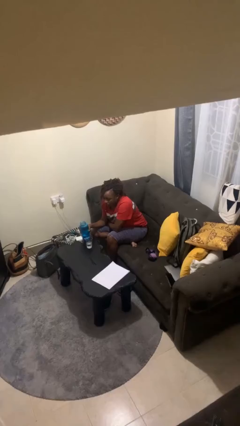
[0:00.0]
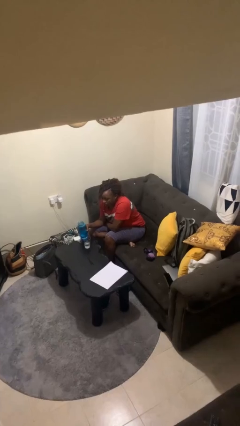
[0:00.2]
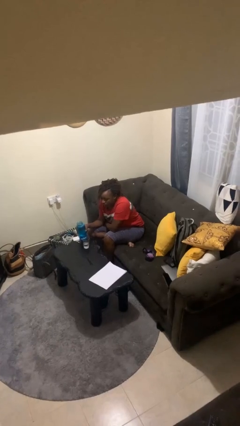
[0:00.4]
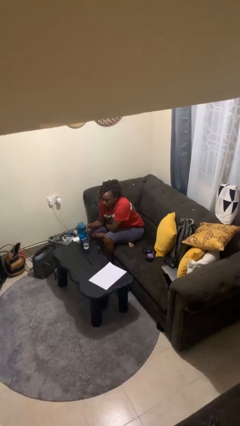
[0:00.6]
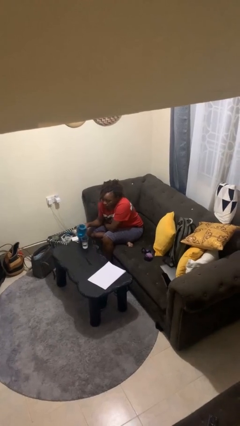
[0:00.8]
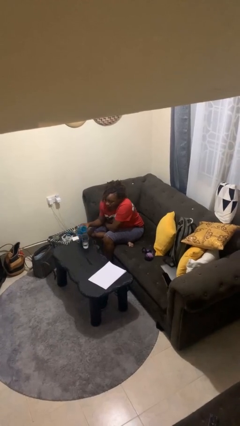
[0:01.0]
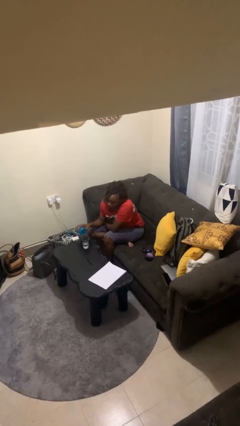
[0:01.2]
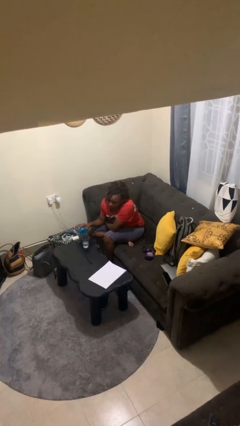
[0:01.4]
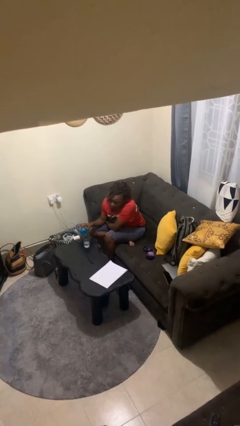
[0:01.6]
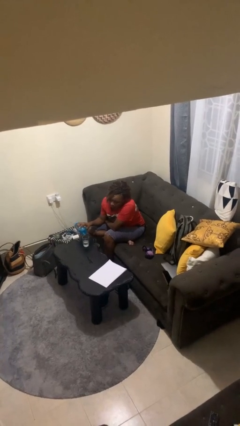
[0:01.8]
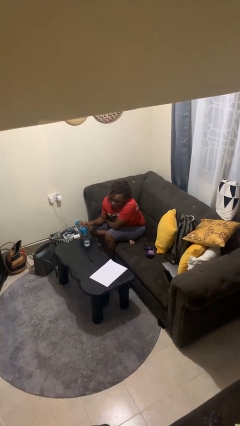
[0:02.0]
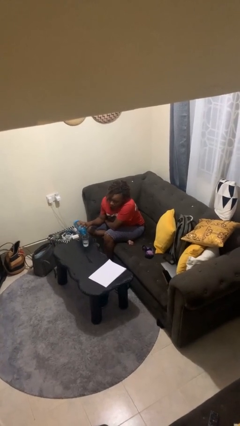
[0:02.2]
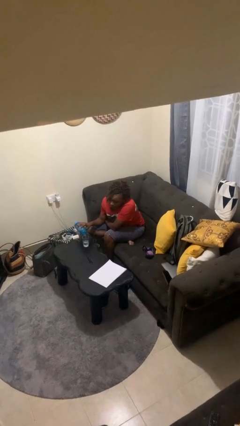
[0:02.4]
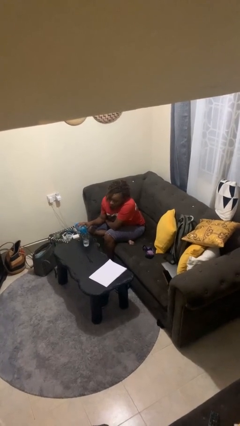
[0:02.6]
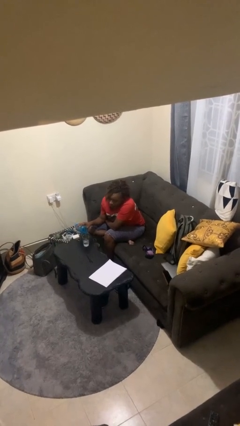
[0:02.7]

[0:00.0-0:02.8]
person pours liquid into cup

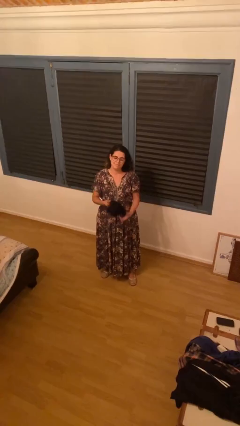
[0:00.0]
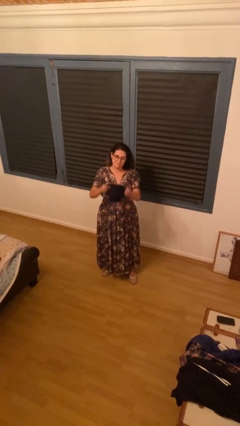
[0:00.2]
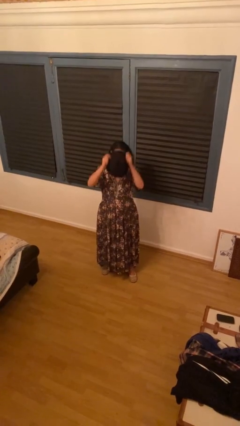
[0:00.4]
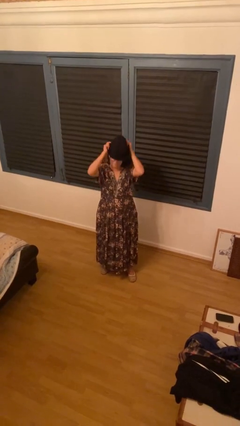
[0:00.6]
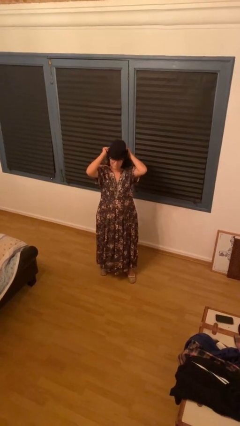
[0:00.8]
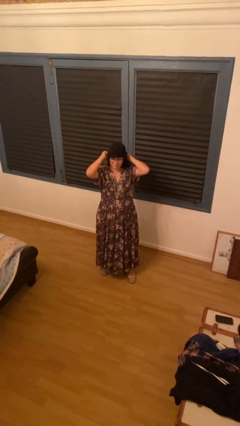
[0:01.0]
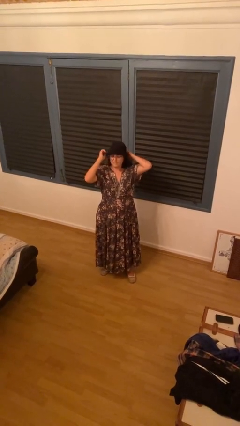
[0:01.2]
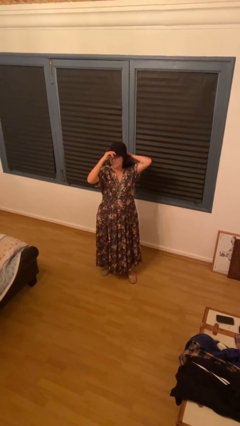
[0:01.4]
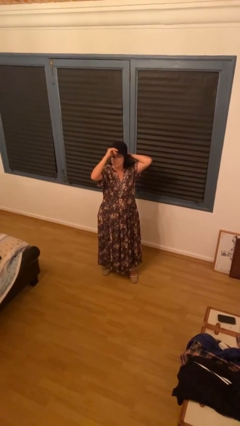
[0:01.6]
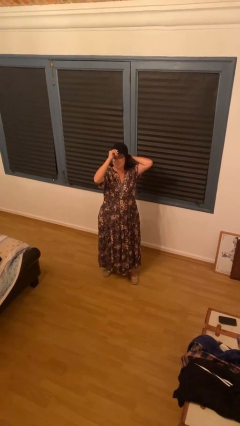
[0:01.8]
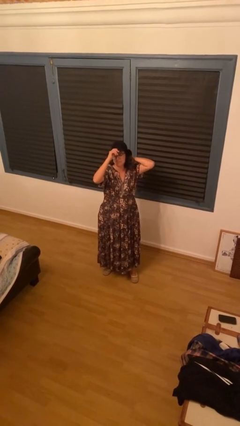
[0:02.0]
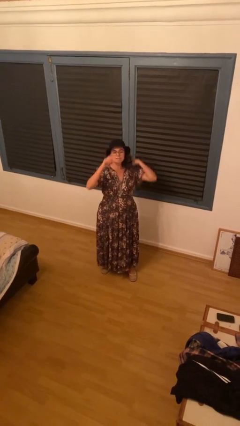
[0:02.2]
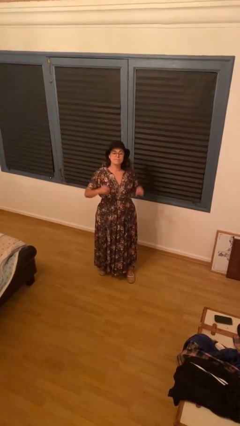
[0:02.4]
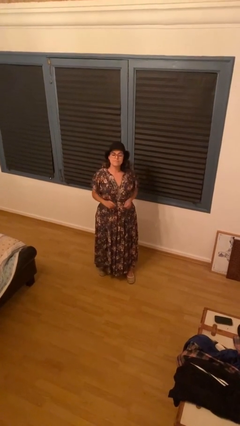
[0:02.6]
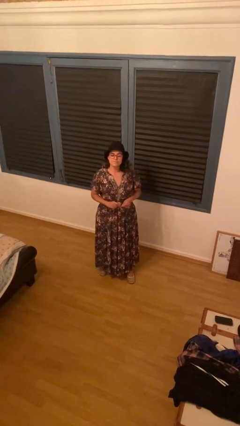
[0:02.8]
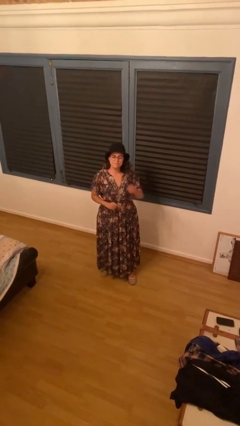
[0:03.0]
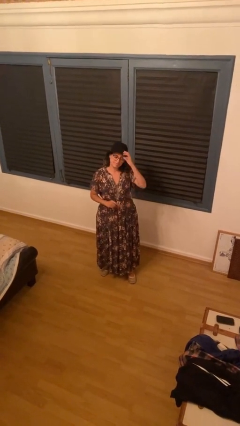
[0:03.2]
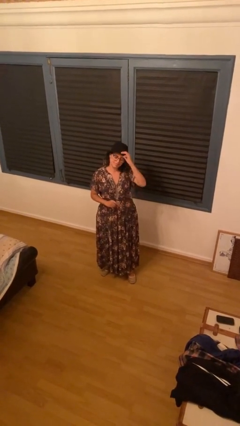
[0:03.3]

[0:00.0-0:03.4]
person puts on hat

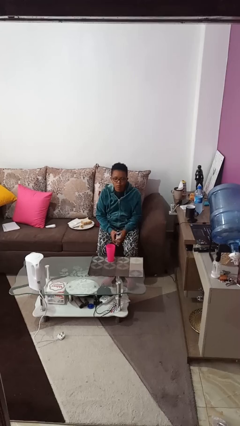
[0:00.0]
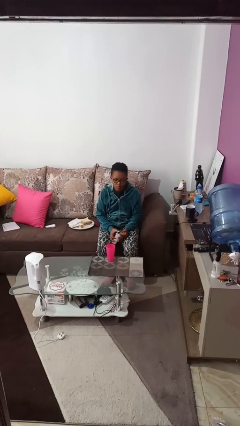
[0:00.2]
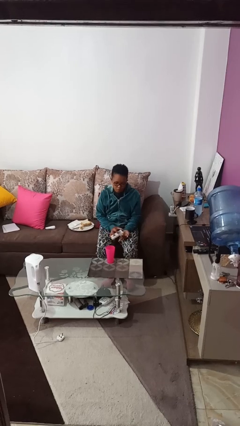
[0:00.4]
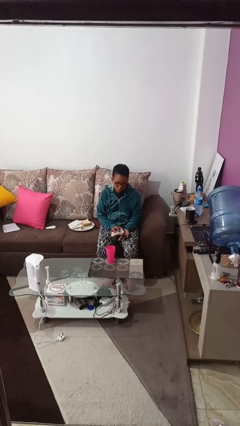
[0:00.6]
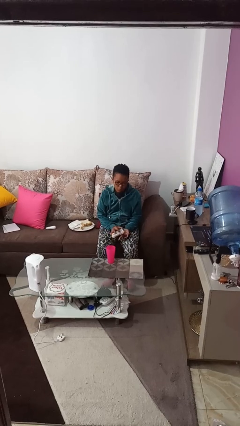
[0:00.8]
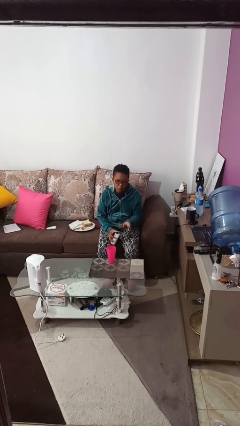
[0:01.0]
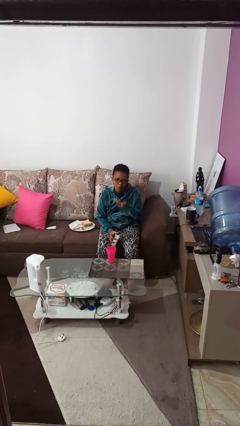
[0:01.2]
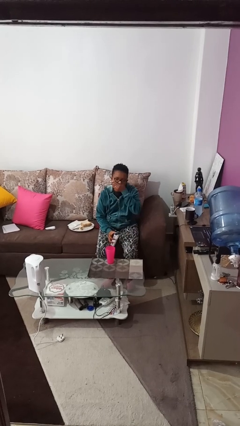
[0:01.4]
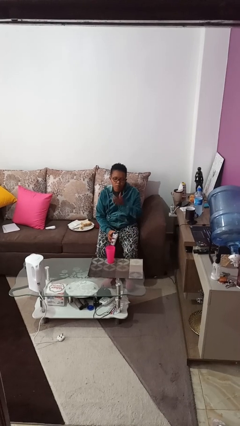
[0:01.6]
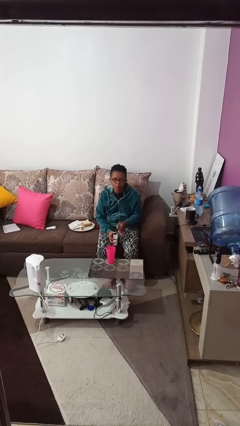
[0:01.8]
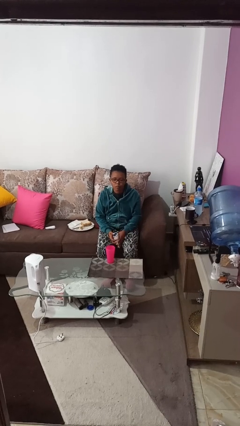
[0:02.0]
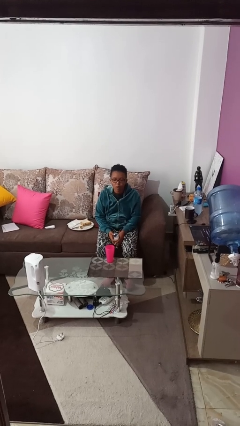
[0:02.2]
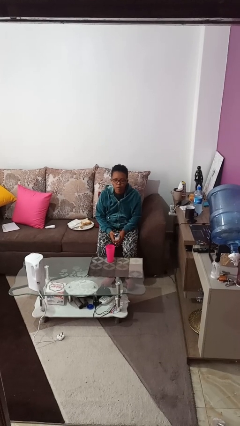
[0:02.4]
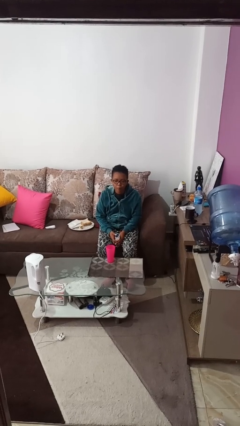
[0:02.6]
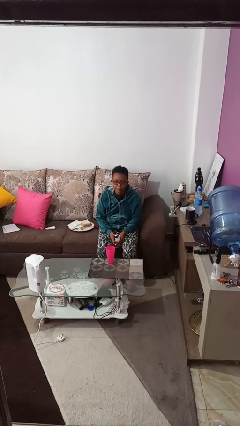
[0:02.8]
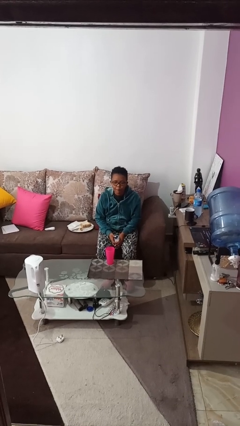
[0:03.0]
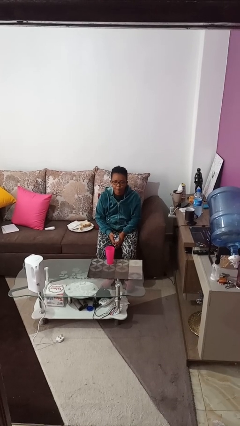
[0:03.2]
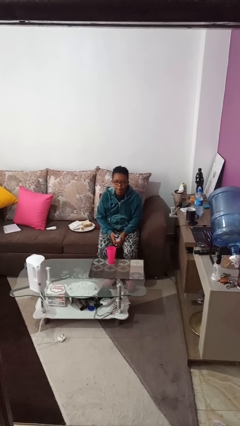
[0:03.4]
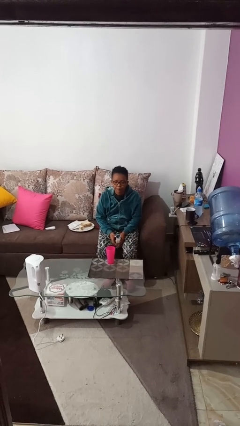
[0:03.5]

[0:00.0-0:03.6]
person takes medicine pills

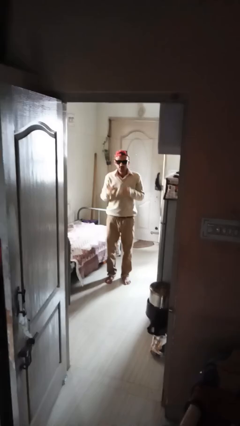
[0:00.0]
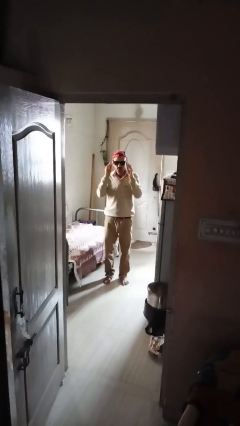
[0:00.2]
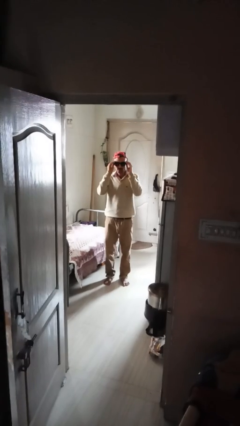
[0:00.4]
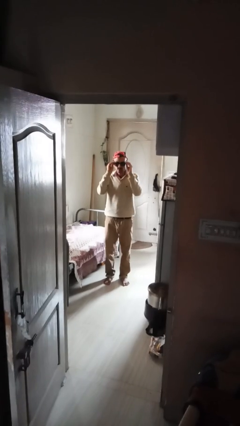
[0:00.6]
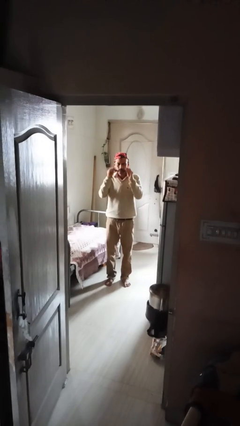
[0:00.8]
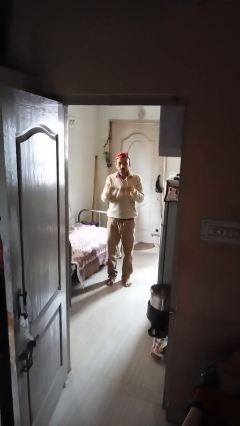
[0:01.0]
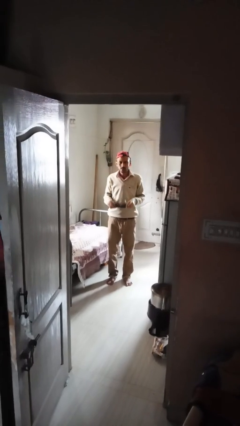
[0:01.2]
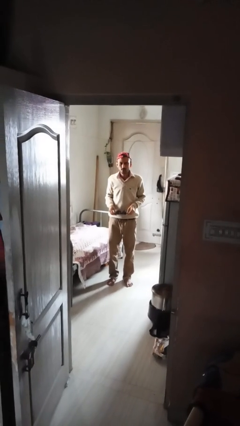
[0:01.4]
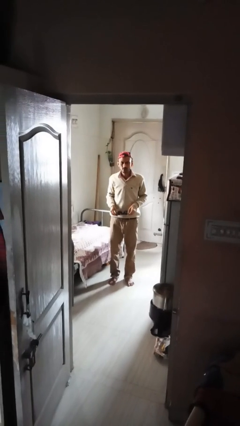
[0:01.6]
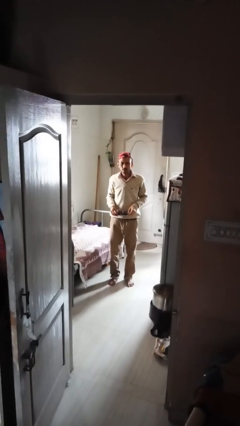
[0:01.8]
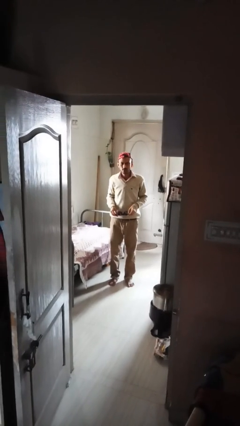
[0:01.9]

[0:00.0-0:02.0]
person takes off sunglasses

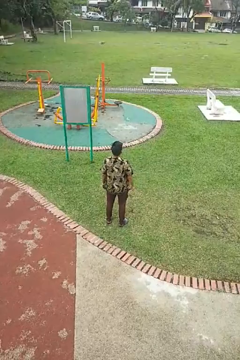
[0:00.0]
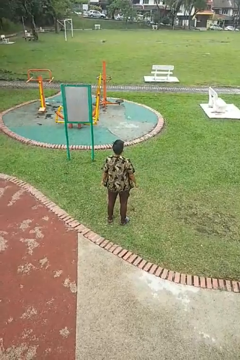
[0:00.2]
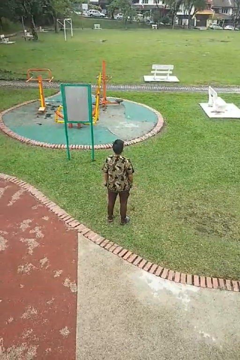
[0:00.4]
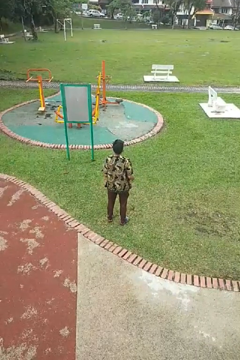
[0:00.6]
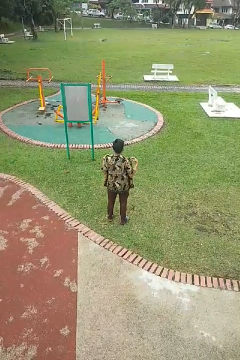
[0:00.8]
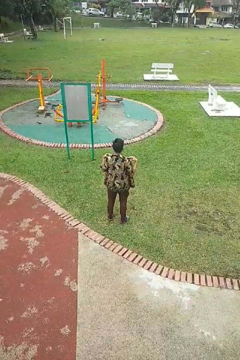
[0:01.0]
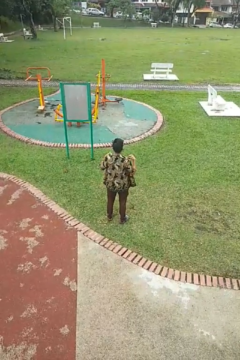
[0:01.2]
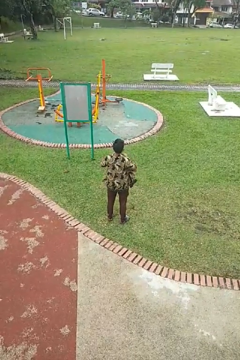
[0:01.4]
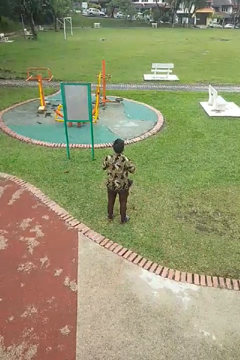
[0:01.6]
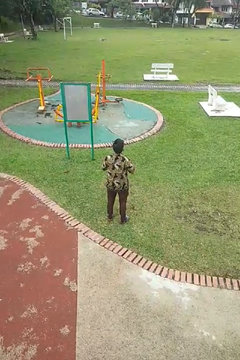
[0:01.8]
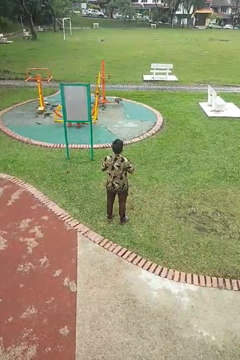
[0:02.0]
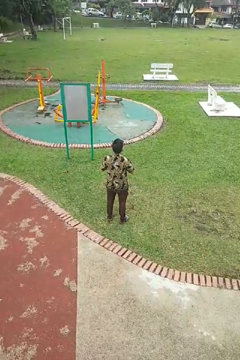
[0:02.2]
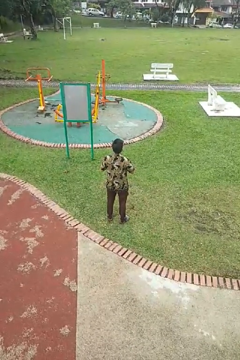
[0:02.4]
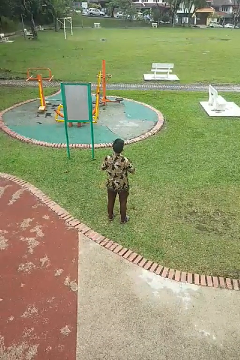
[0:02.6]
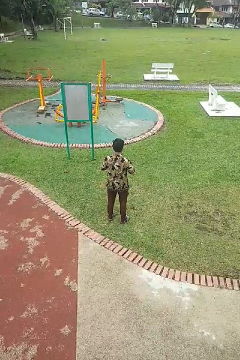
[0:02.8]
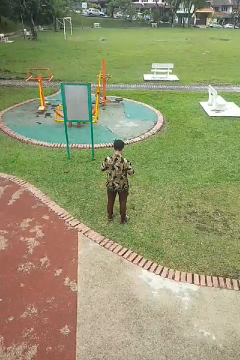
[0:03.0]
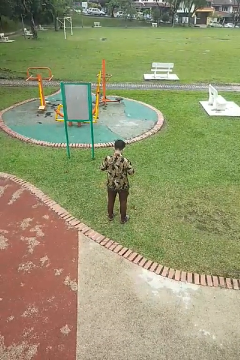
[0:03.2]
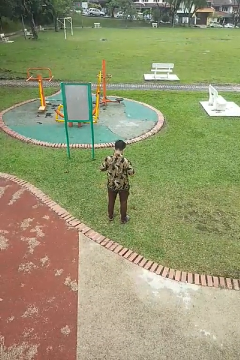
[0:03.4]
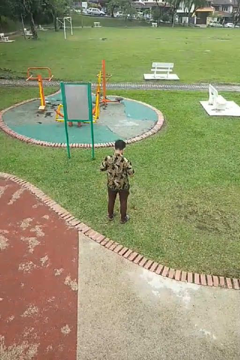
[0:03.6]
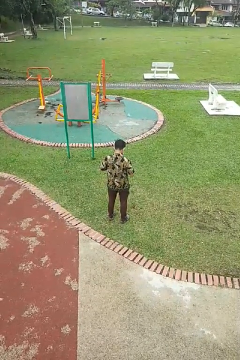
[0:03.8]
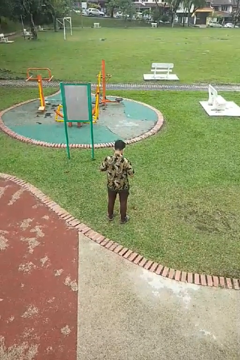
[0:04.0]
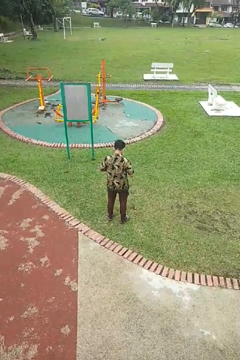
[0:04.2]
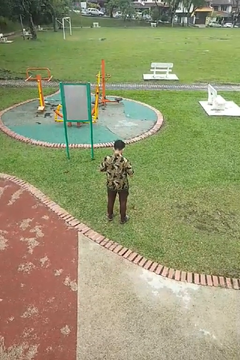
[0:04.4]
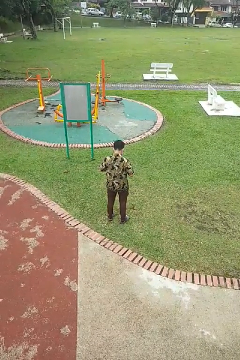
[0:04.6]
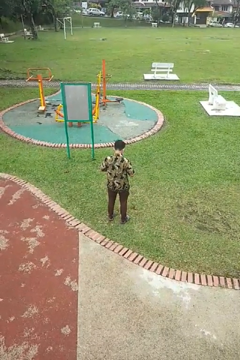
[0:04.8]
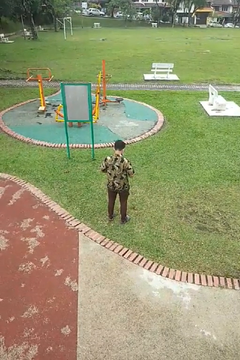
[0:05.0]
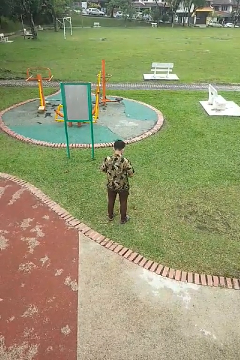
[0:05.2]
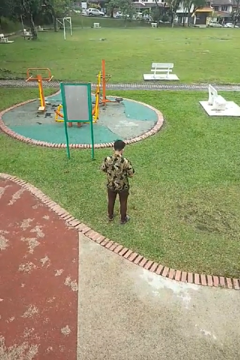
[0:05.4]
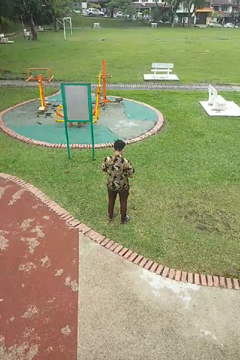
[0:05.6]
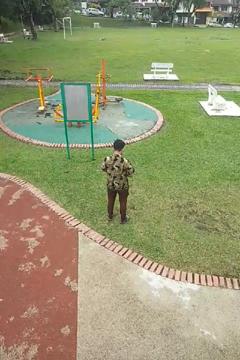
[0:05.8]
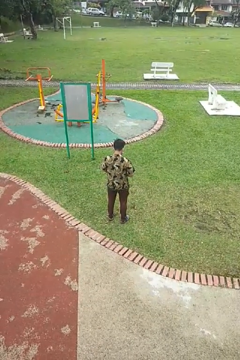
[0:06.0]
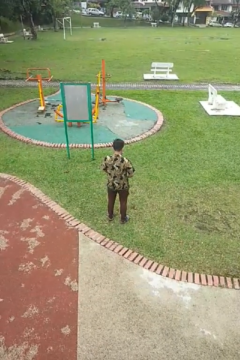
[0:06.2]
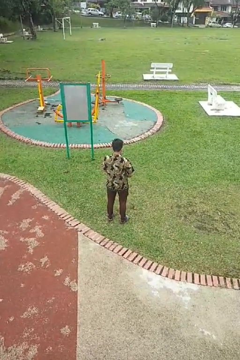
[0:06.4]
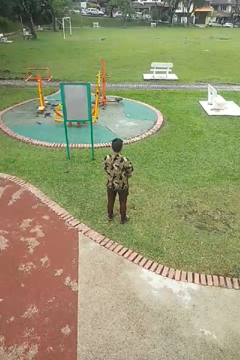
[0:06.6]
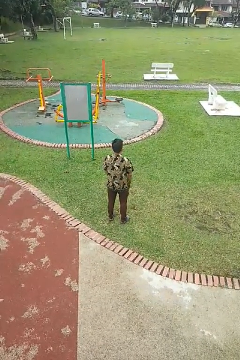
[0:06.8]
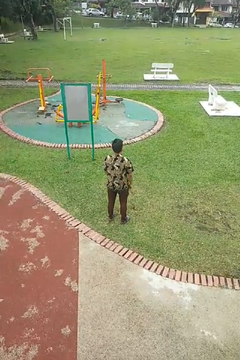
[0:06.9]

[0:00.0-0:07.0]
person buttons shirt
